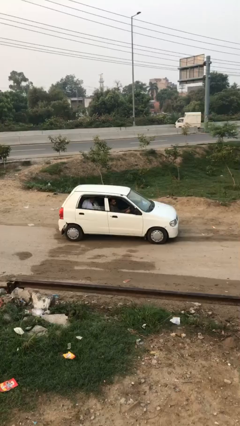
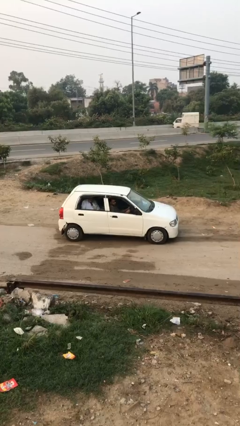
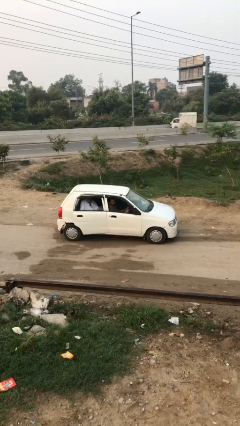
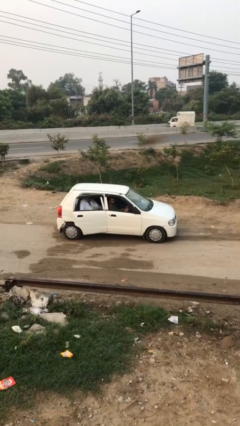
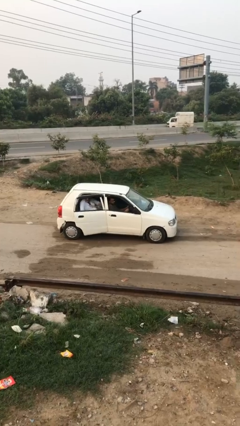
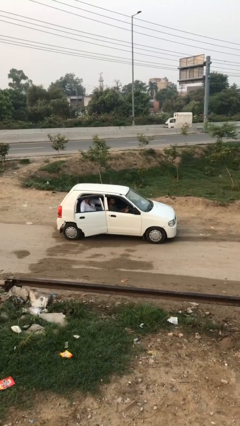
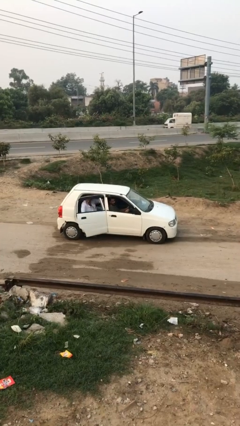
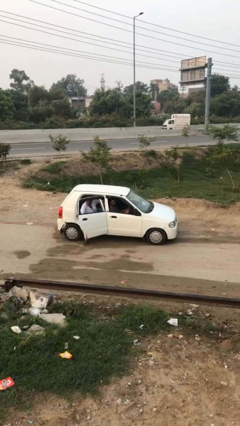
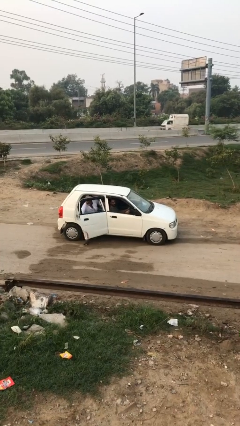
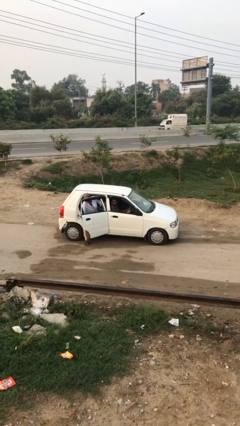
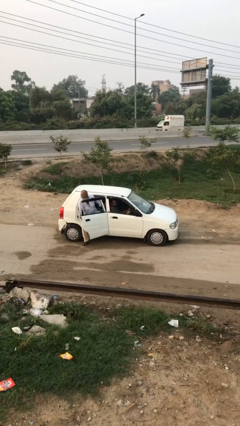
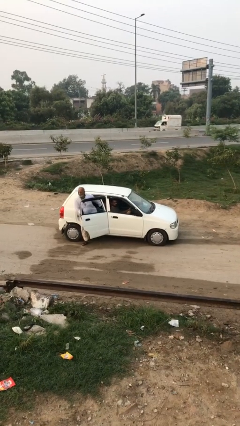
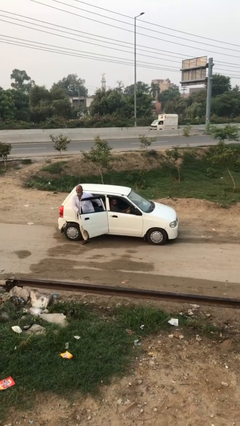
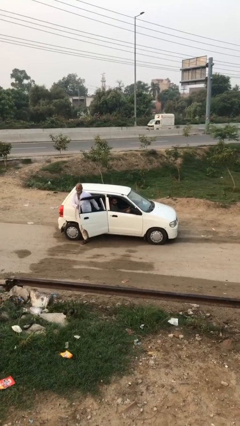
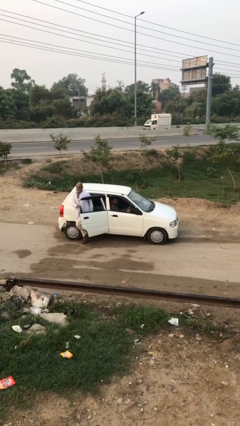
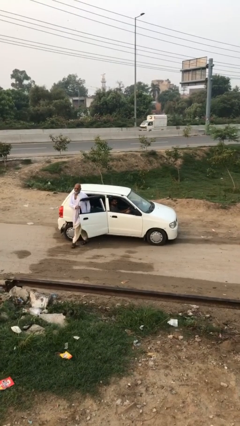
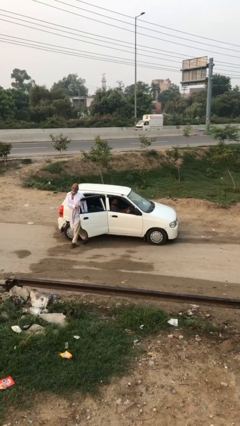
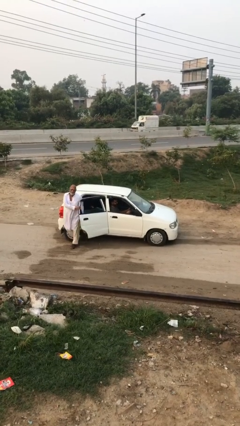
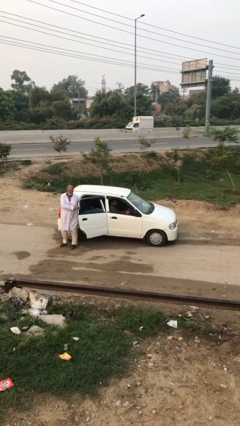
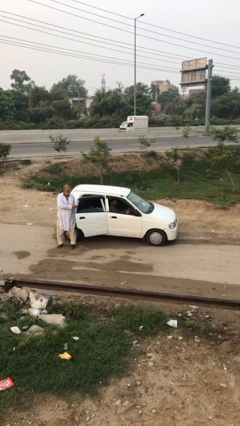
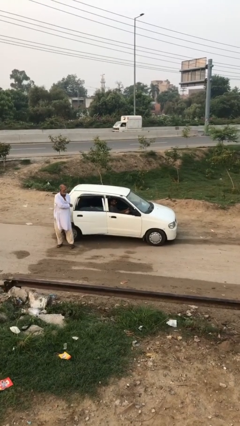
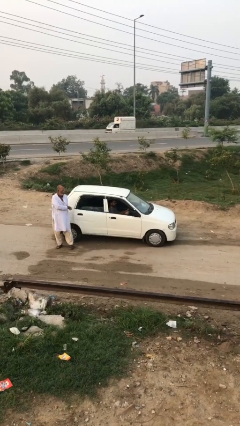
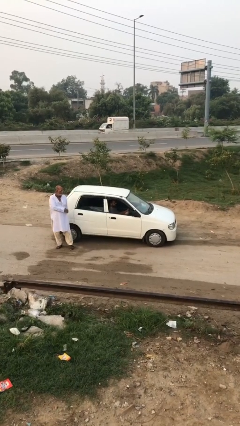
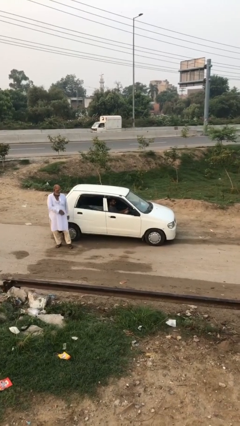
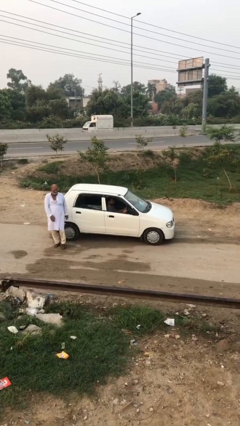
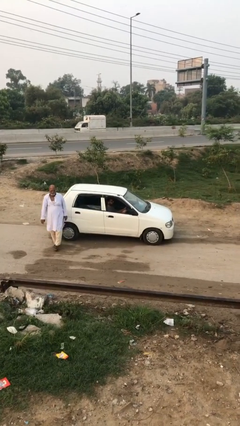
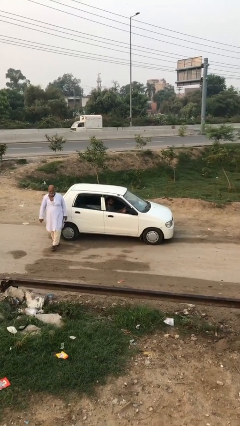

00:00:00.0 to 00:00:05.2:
car drops off person

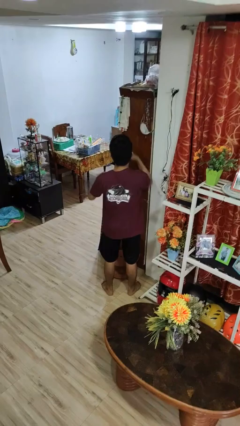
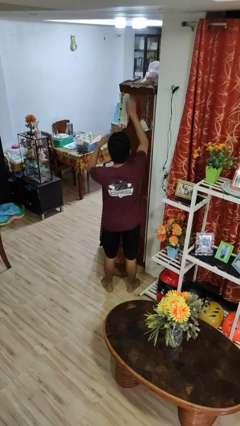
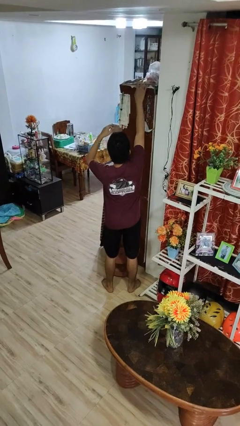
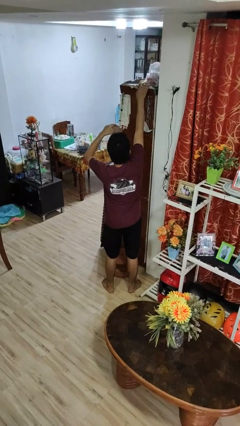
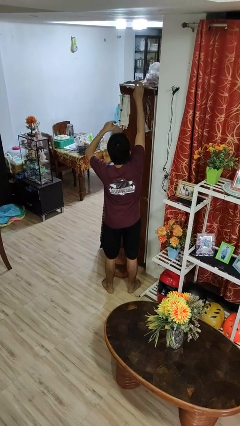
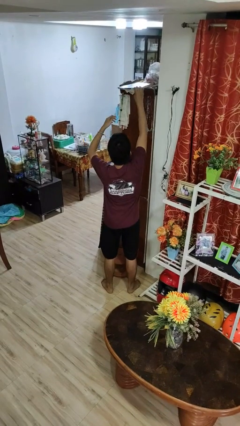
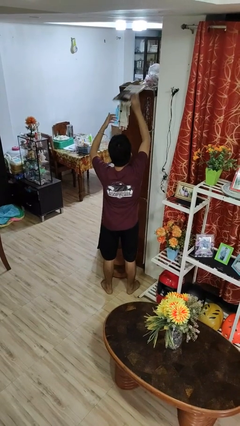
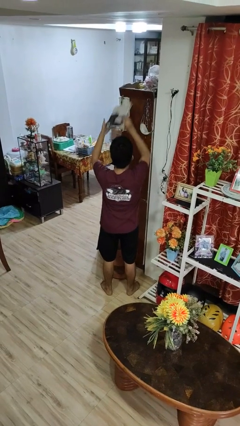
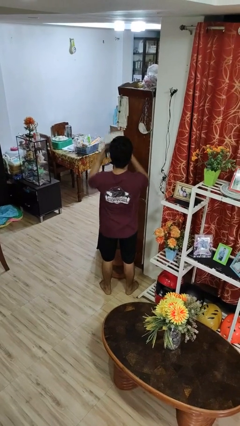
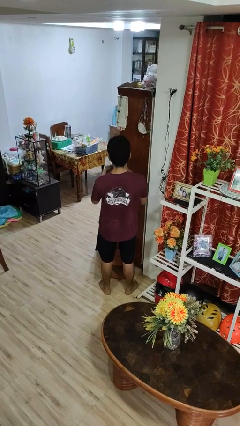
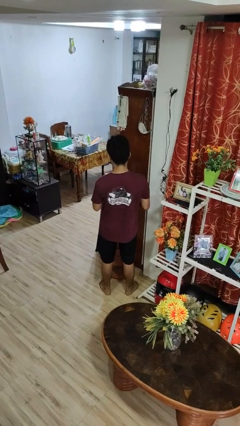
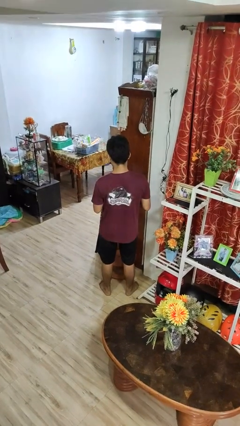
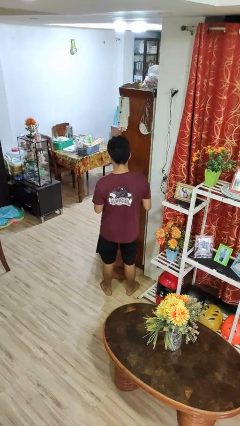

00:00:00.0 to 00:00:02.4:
person picks up object from shelf

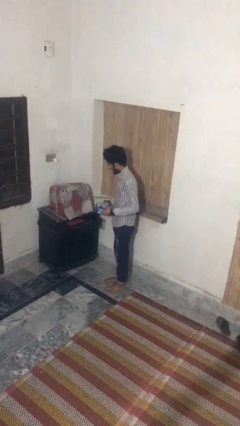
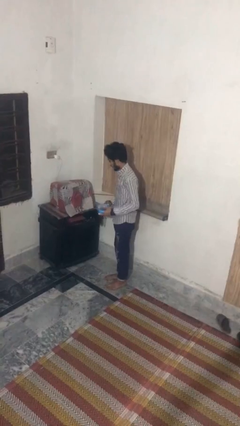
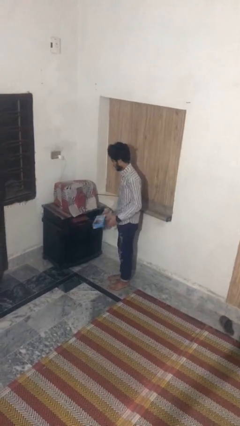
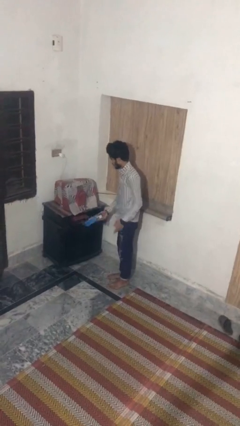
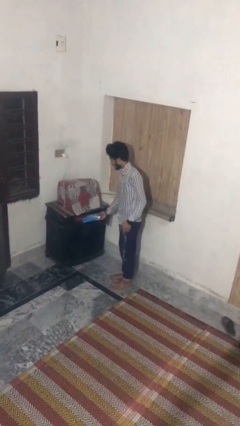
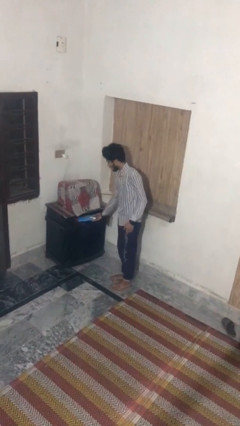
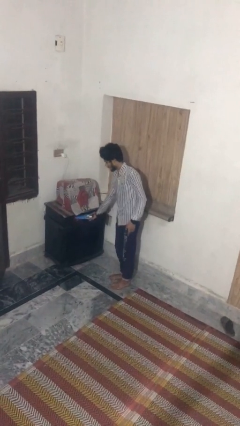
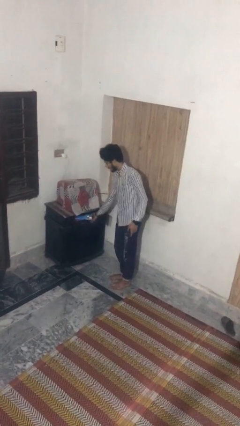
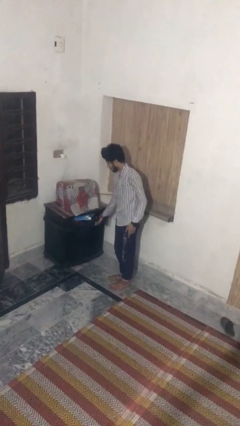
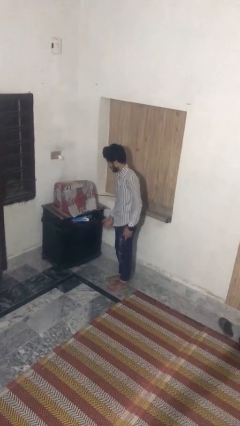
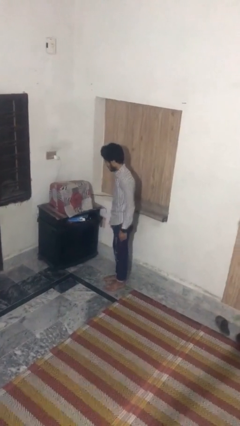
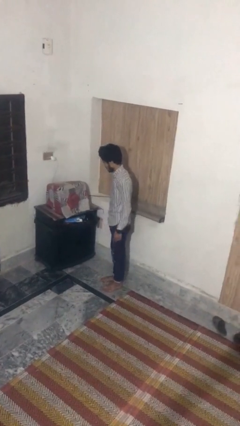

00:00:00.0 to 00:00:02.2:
person puts down object into cabinet

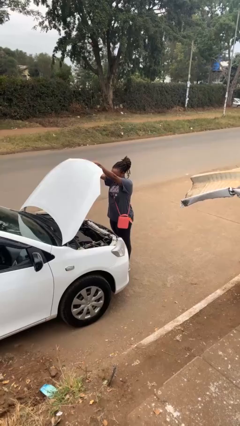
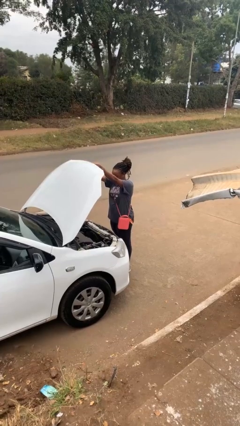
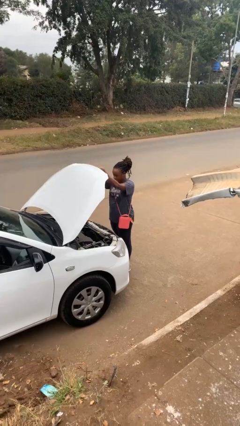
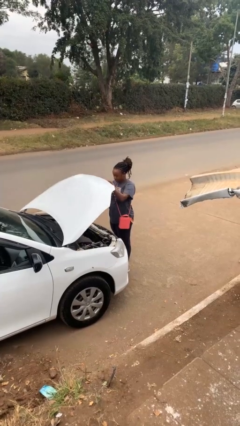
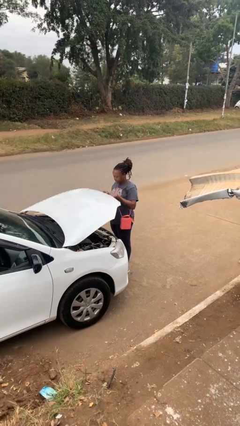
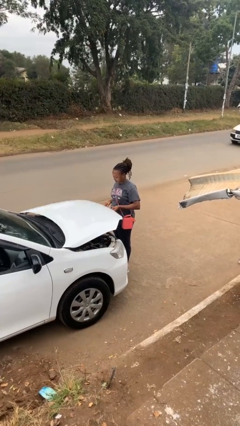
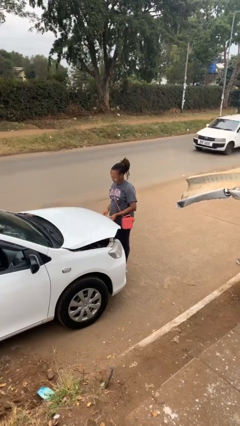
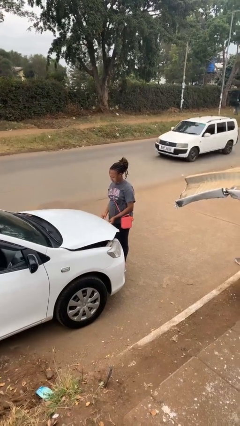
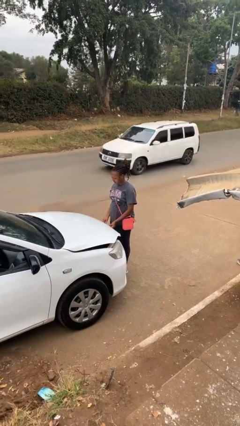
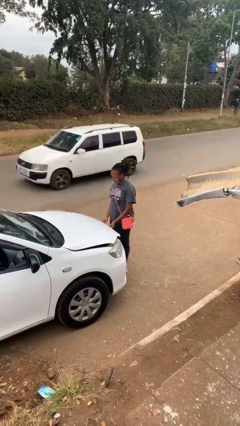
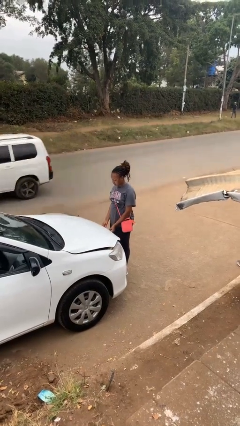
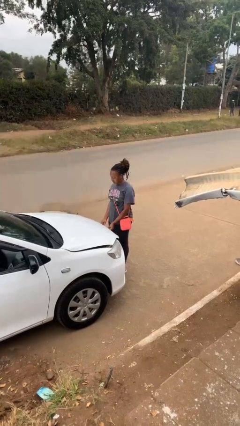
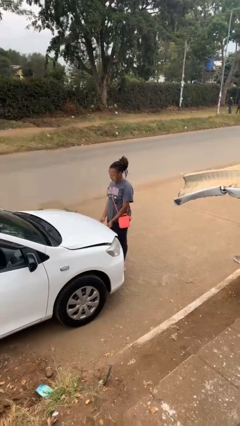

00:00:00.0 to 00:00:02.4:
person closes car hood

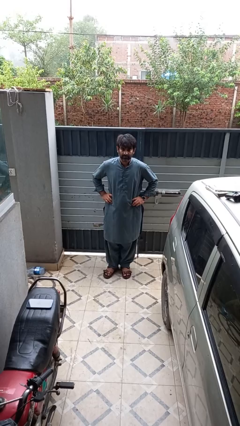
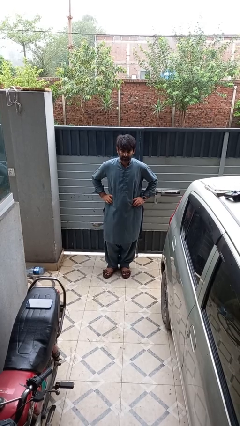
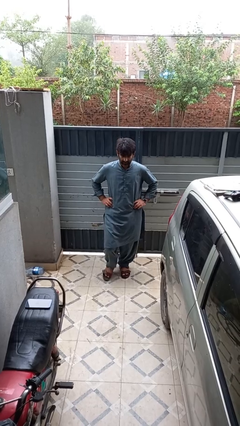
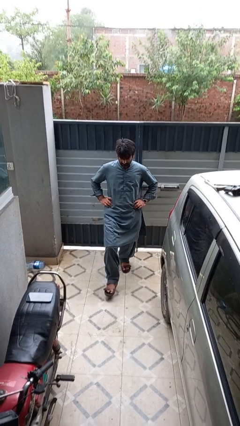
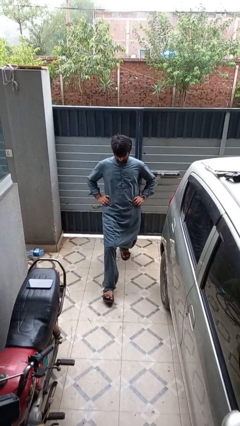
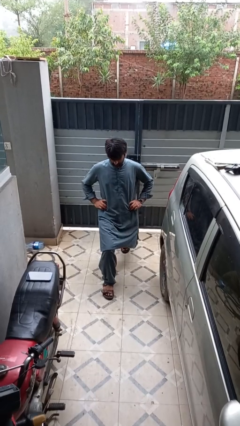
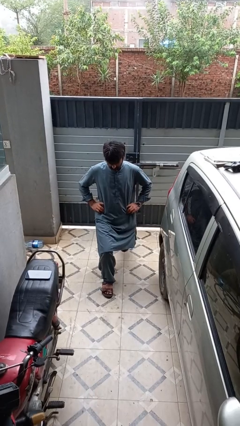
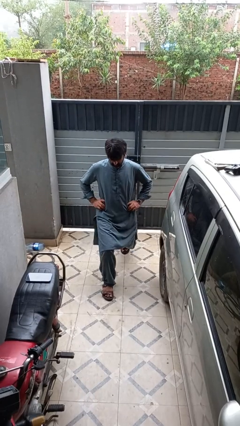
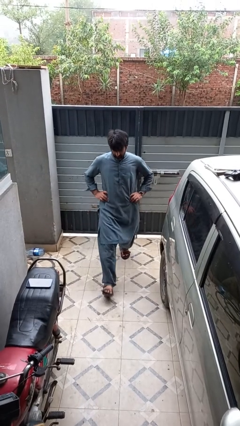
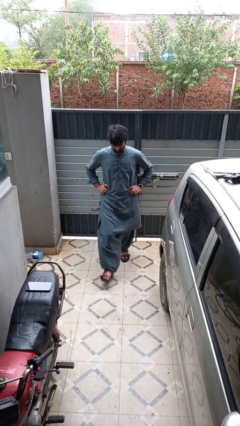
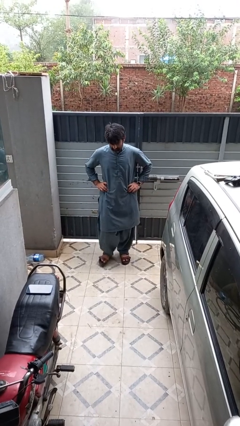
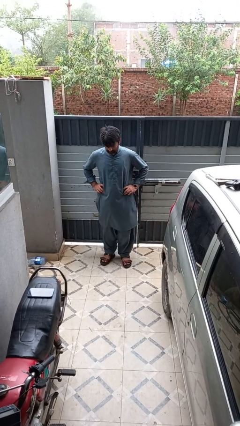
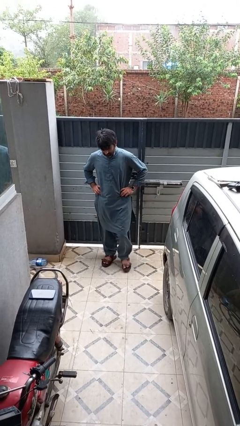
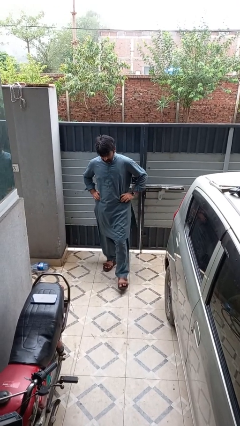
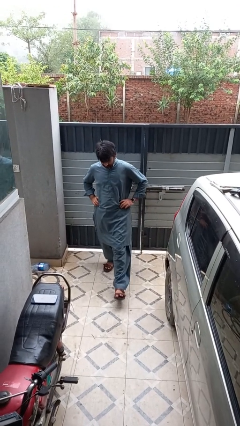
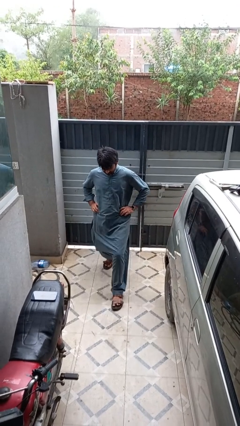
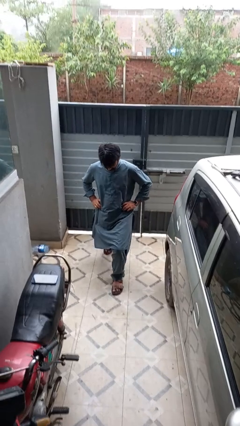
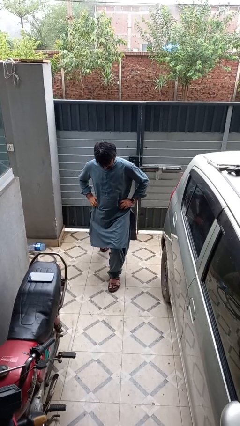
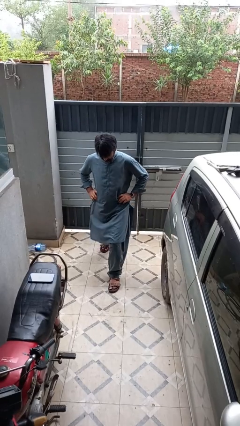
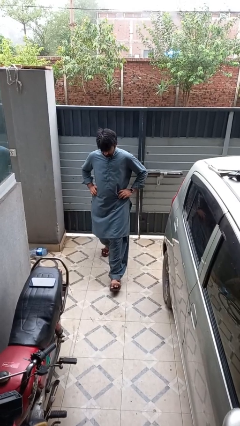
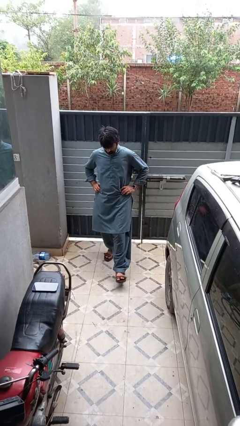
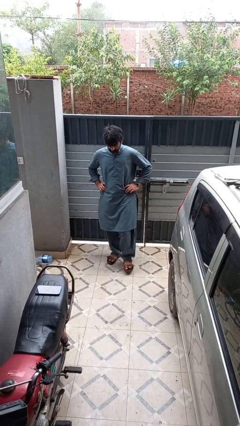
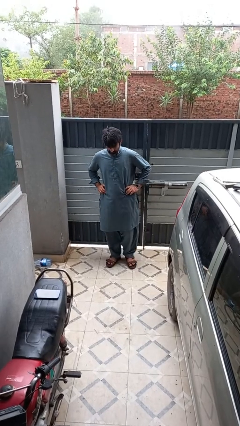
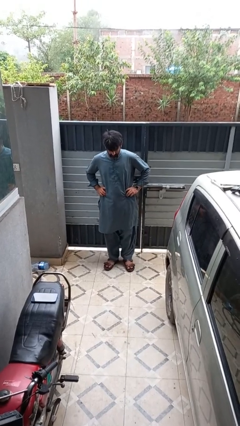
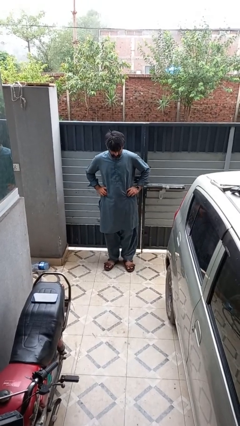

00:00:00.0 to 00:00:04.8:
person exercises with lunges

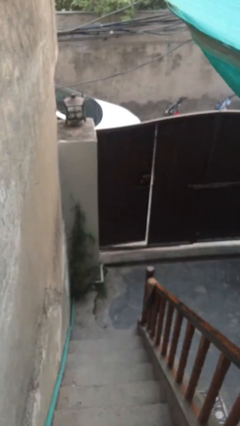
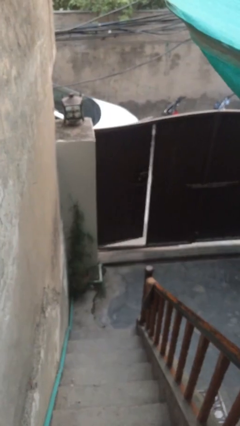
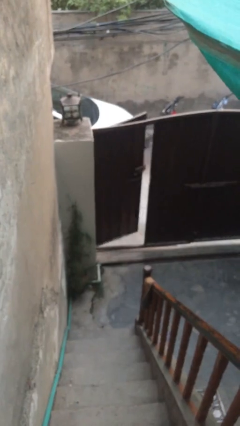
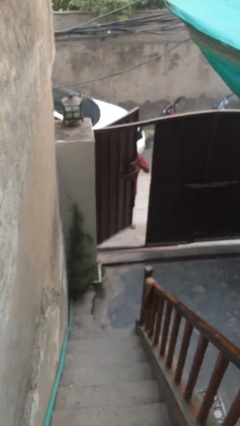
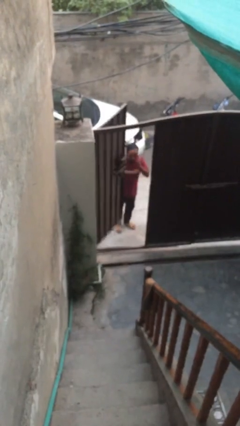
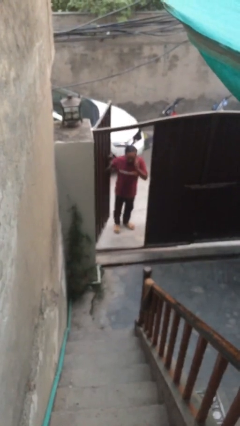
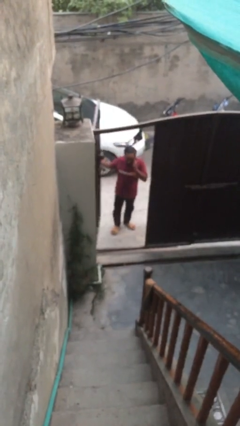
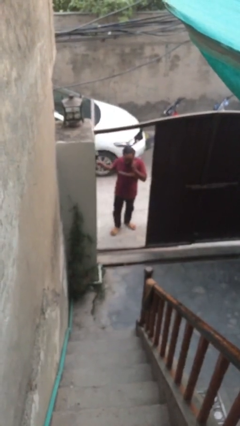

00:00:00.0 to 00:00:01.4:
person opens facility door
